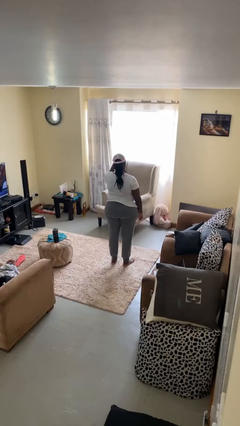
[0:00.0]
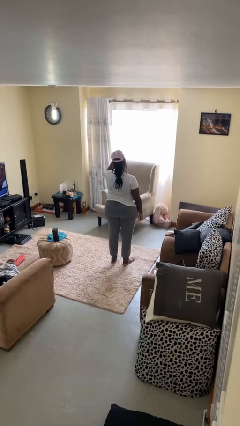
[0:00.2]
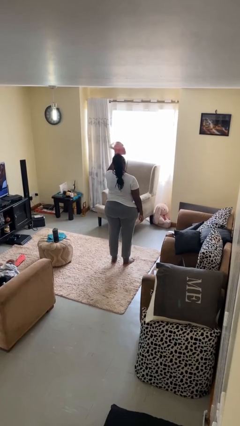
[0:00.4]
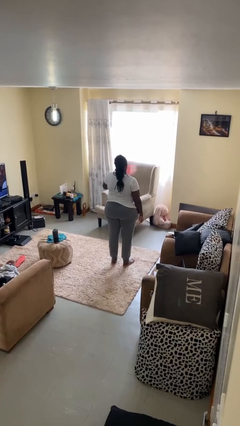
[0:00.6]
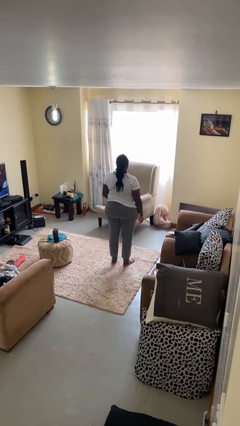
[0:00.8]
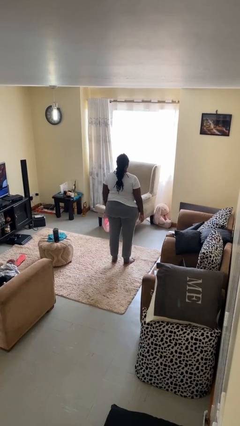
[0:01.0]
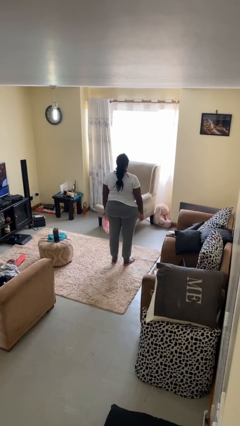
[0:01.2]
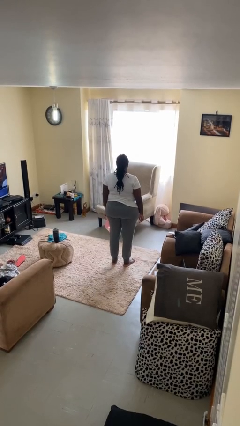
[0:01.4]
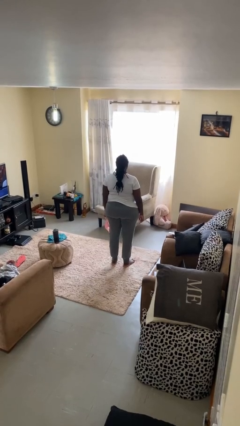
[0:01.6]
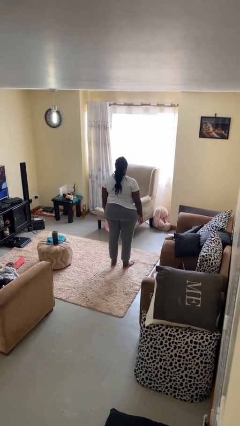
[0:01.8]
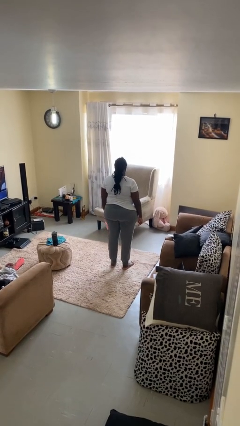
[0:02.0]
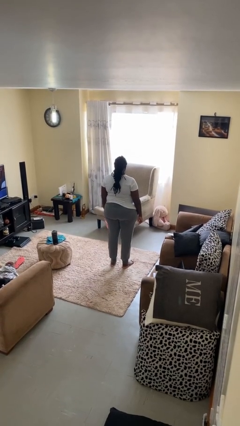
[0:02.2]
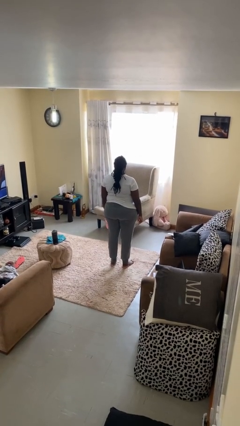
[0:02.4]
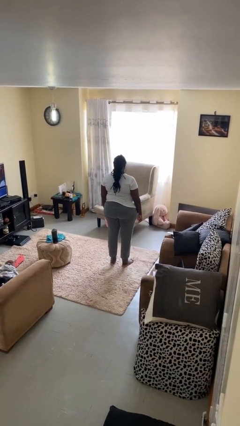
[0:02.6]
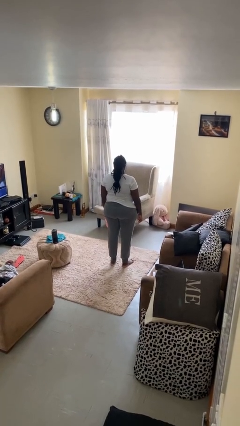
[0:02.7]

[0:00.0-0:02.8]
person takes off hat

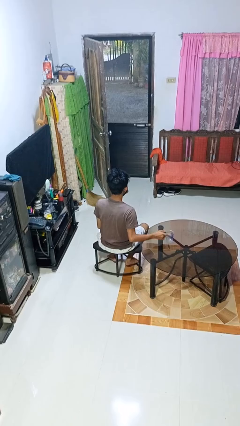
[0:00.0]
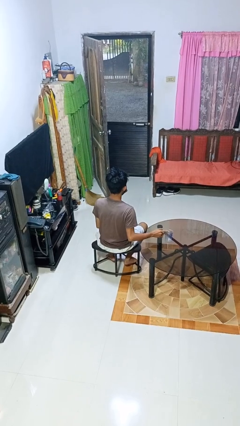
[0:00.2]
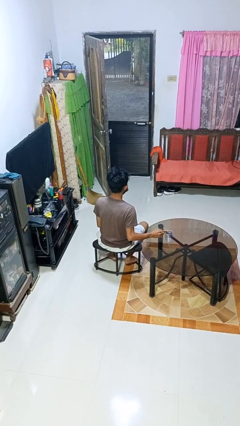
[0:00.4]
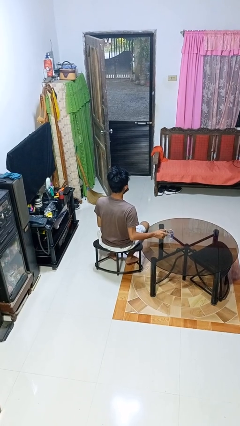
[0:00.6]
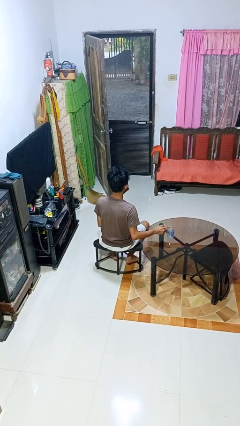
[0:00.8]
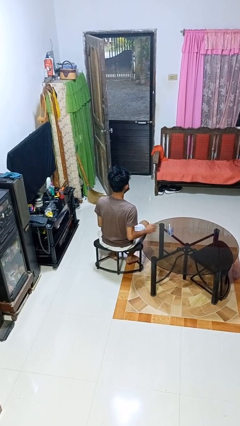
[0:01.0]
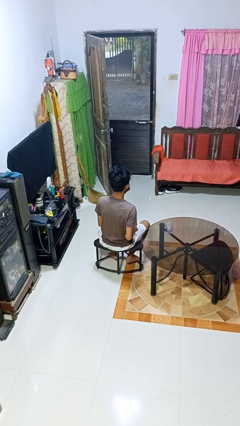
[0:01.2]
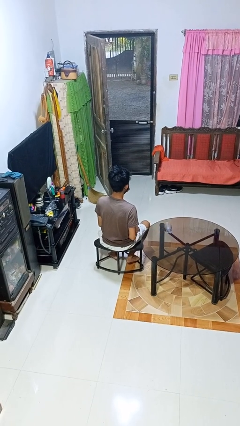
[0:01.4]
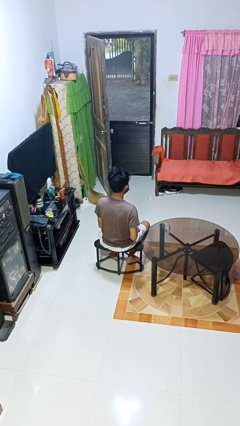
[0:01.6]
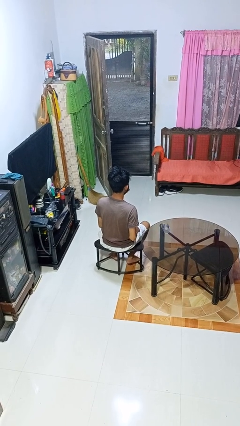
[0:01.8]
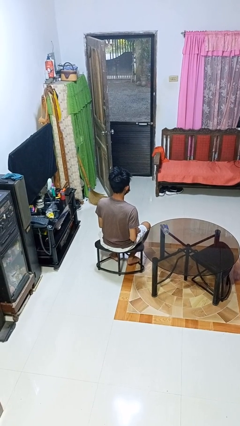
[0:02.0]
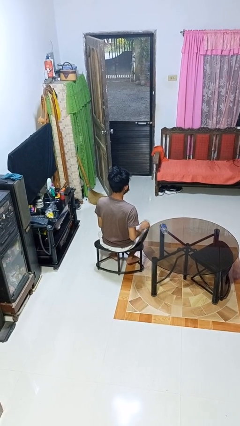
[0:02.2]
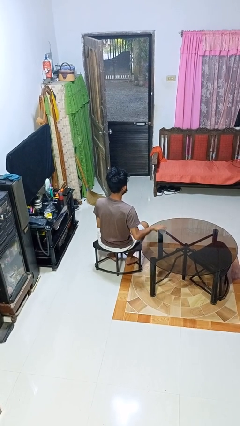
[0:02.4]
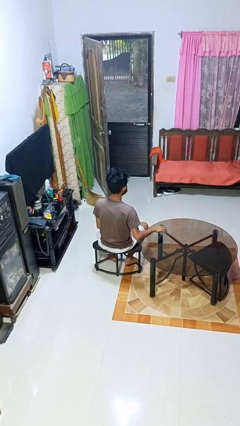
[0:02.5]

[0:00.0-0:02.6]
person knocks over glass

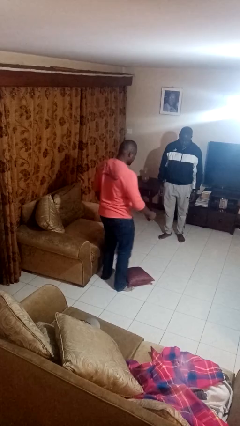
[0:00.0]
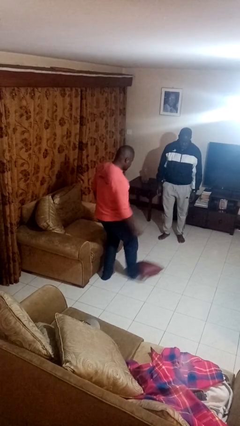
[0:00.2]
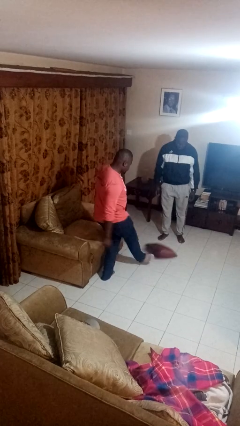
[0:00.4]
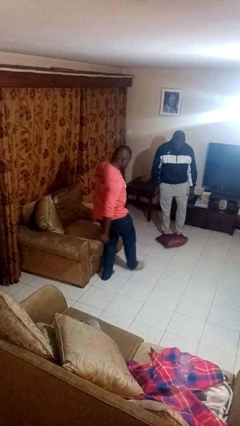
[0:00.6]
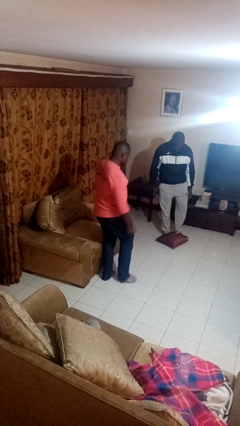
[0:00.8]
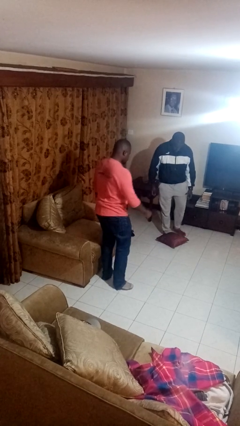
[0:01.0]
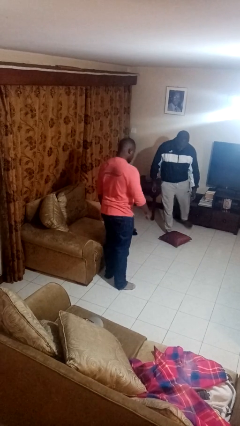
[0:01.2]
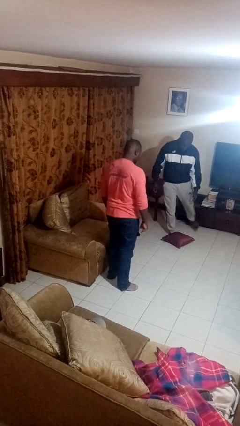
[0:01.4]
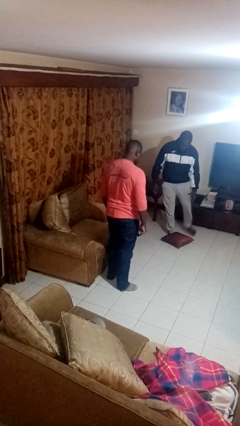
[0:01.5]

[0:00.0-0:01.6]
person kicks object to person

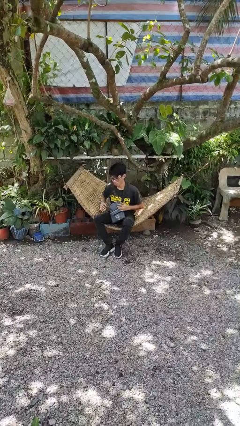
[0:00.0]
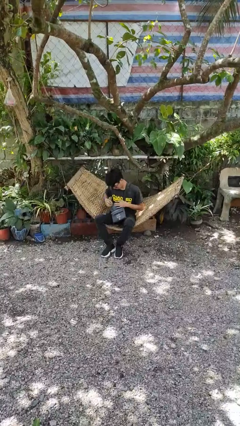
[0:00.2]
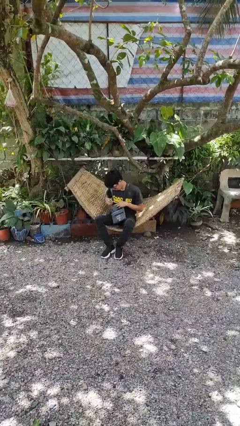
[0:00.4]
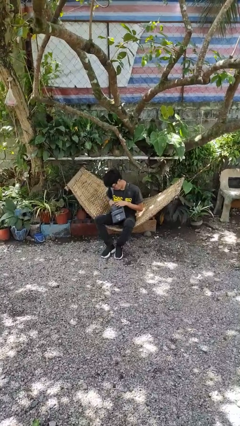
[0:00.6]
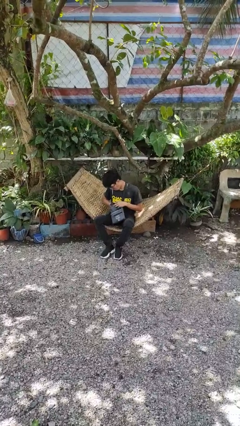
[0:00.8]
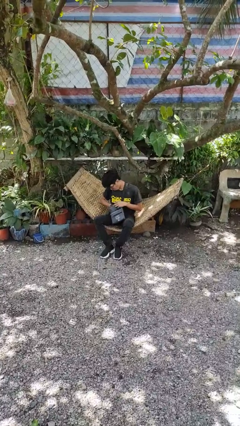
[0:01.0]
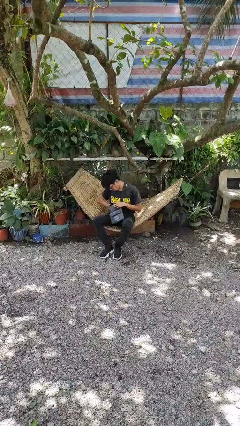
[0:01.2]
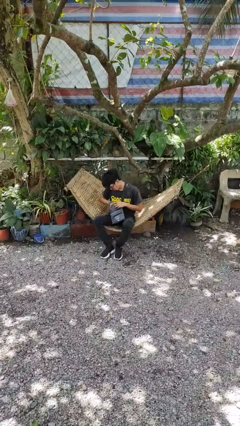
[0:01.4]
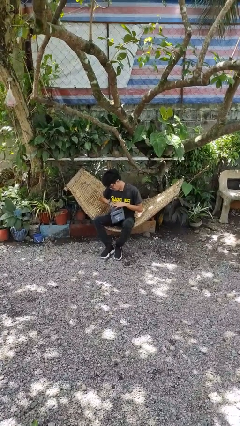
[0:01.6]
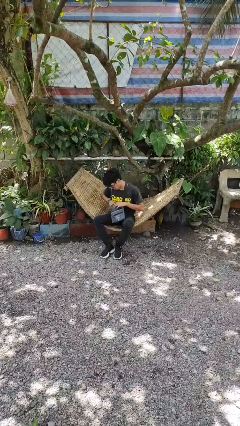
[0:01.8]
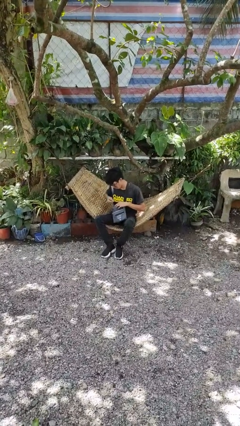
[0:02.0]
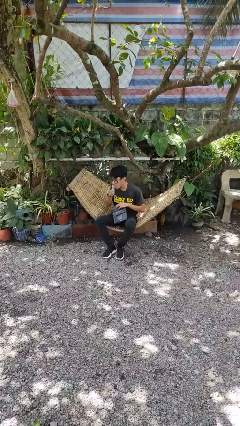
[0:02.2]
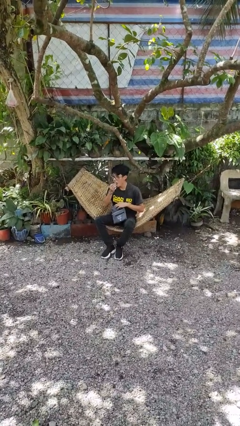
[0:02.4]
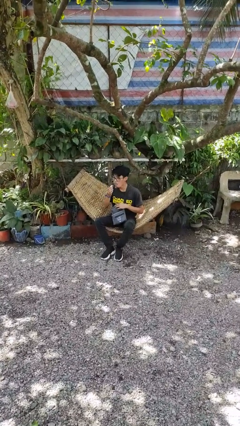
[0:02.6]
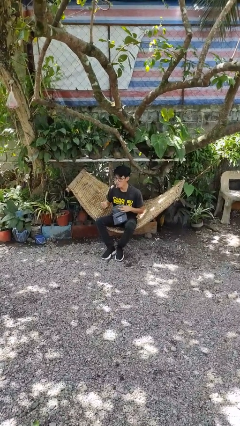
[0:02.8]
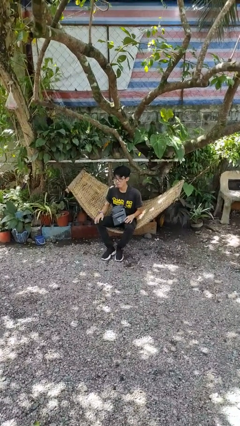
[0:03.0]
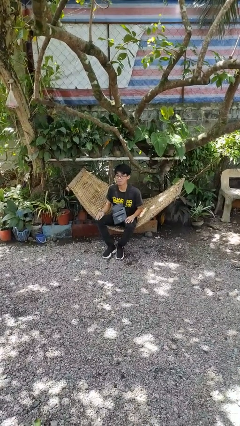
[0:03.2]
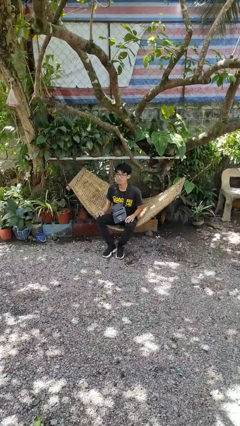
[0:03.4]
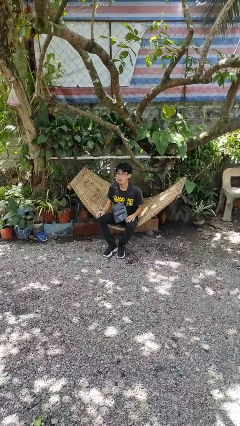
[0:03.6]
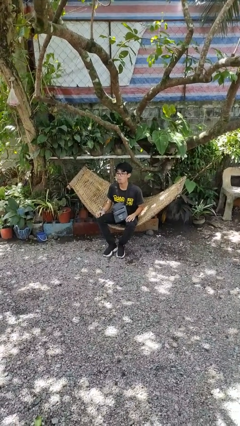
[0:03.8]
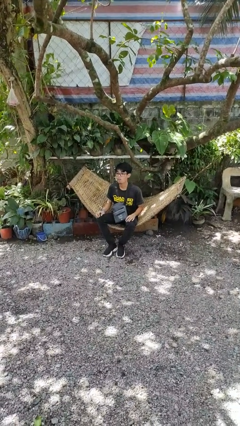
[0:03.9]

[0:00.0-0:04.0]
person eats snack from bag

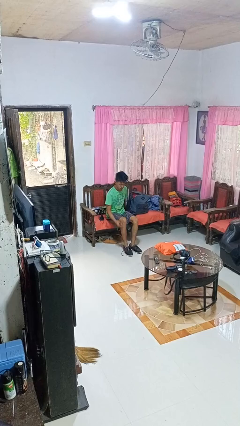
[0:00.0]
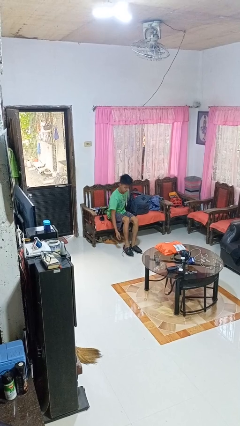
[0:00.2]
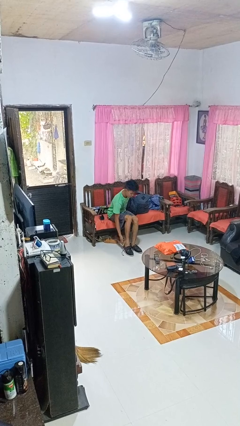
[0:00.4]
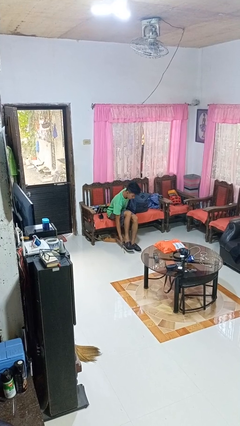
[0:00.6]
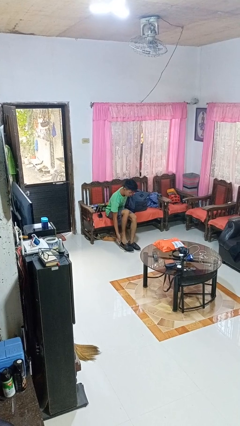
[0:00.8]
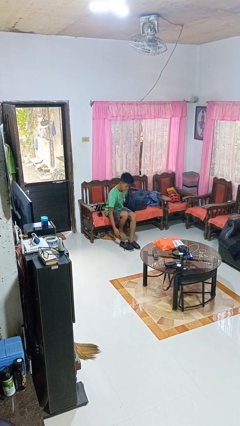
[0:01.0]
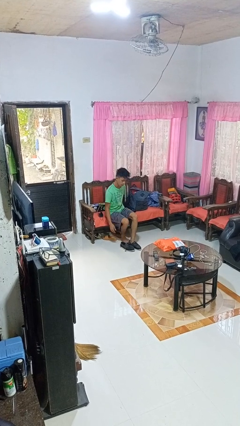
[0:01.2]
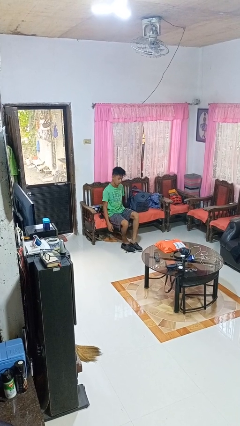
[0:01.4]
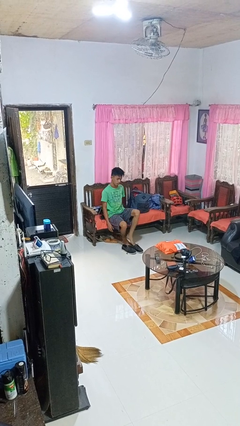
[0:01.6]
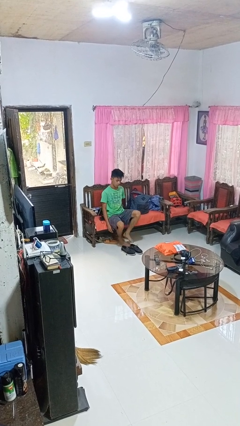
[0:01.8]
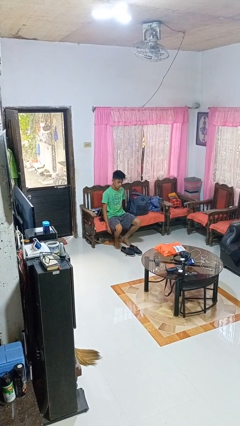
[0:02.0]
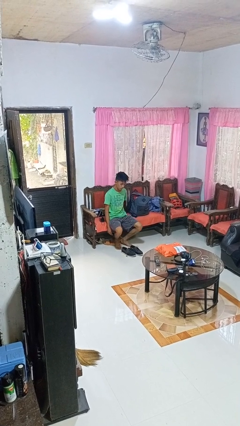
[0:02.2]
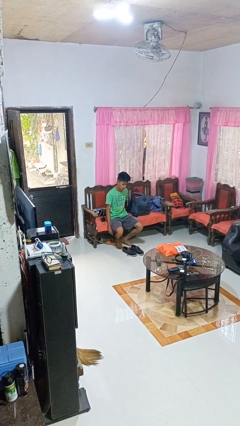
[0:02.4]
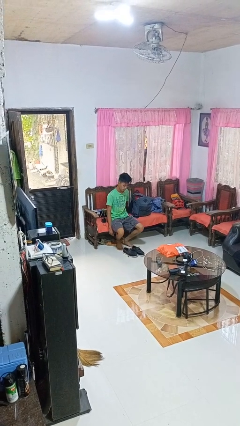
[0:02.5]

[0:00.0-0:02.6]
person takes off shoes

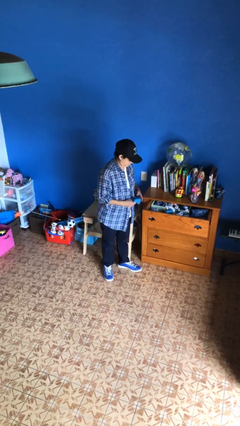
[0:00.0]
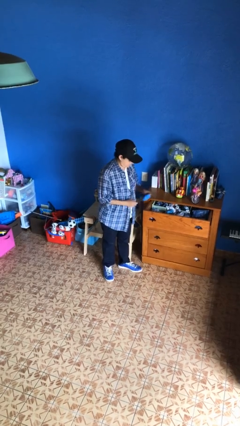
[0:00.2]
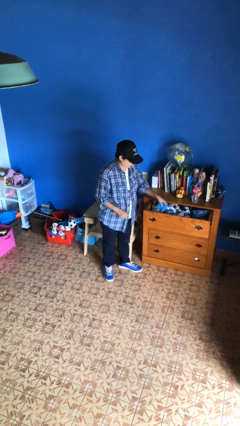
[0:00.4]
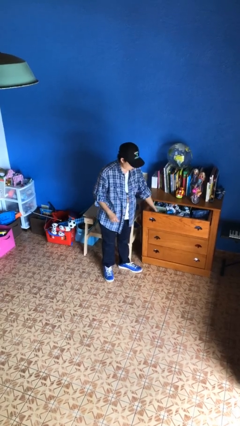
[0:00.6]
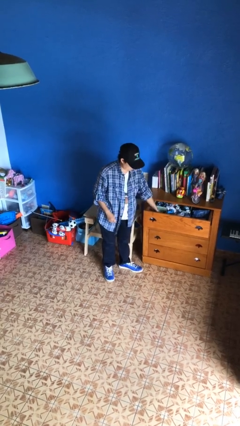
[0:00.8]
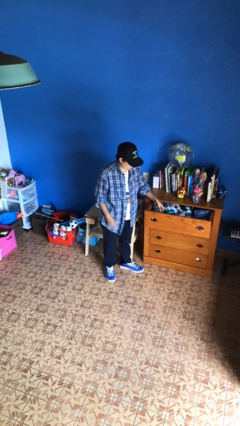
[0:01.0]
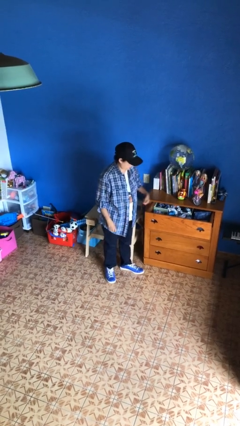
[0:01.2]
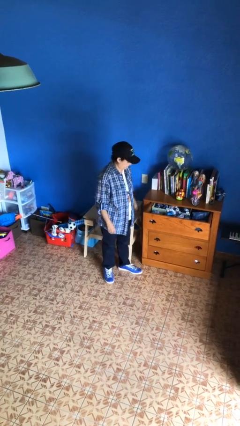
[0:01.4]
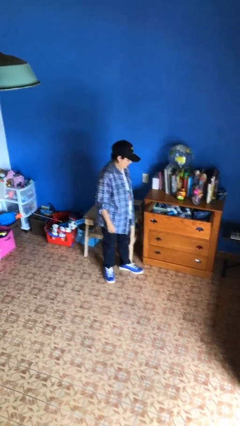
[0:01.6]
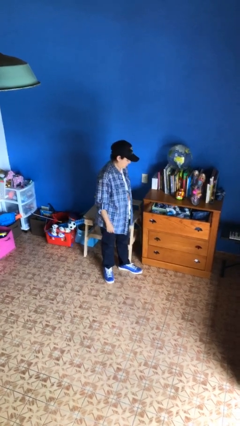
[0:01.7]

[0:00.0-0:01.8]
person puts clothes into dresser

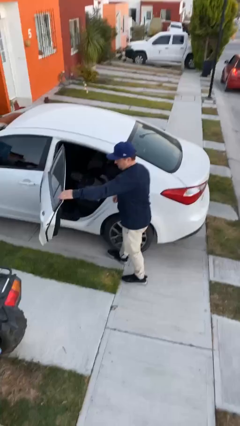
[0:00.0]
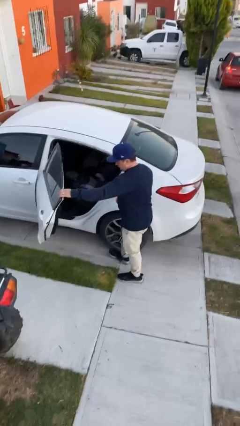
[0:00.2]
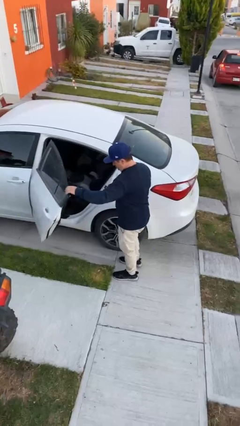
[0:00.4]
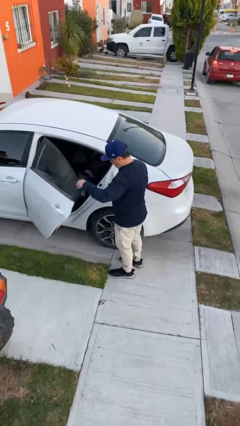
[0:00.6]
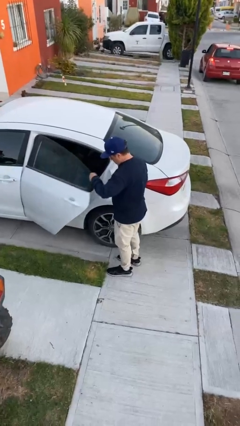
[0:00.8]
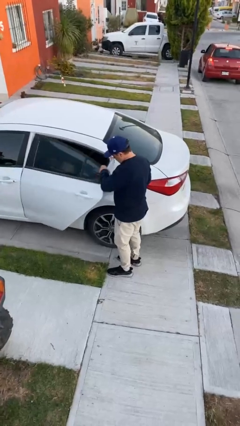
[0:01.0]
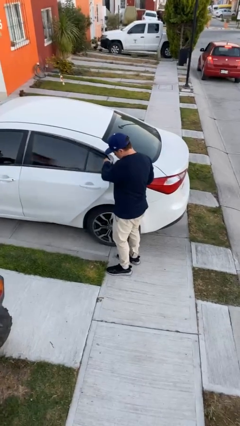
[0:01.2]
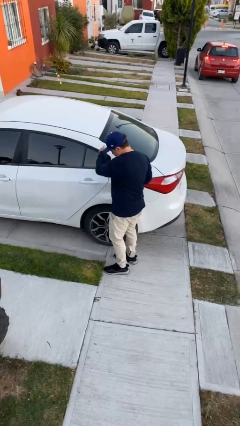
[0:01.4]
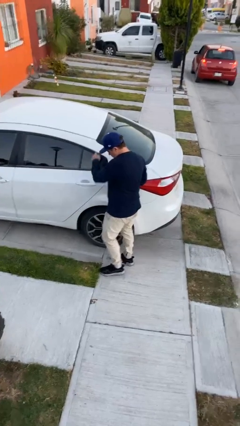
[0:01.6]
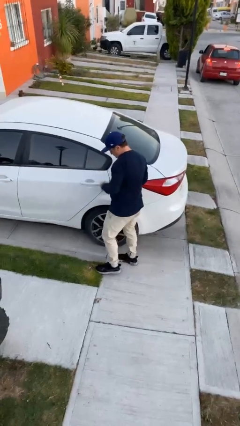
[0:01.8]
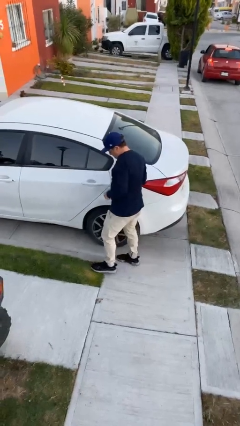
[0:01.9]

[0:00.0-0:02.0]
person closes car door
